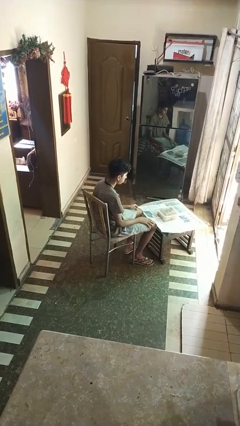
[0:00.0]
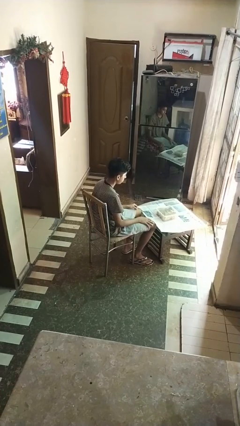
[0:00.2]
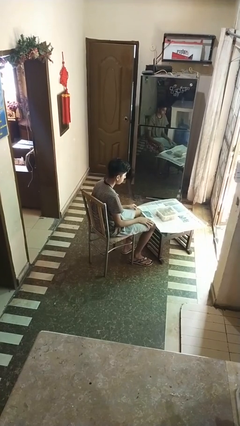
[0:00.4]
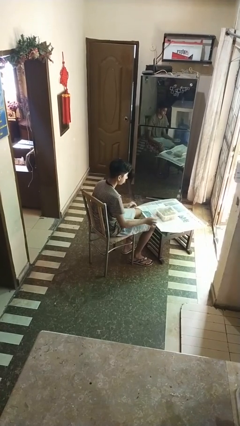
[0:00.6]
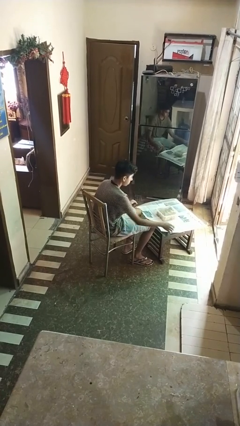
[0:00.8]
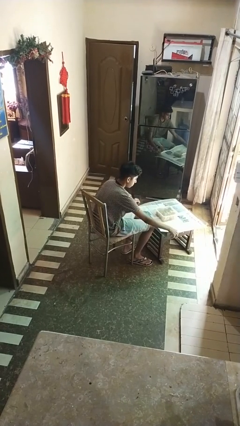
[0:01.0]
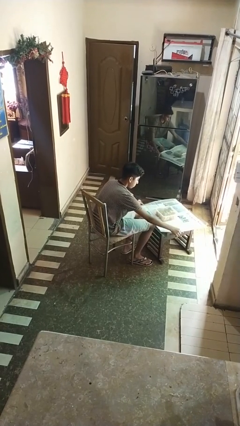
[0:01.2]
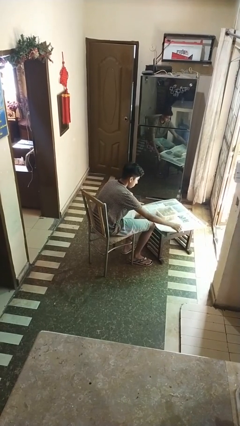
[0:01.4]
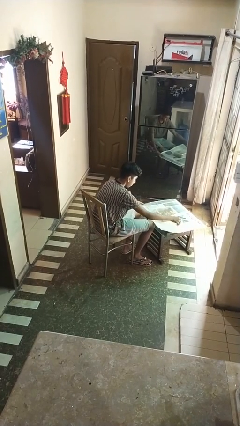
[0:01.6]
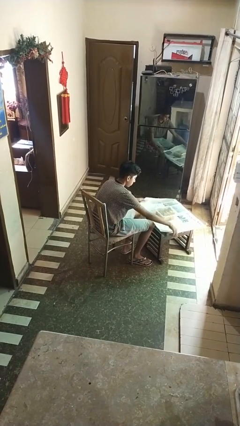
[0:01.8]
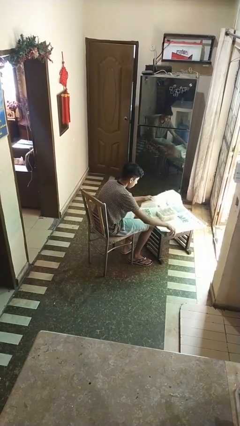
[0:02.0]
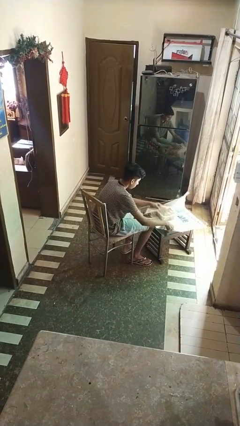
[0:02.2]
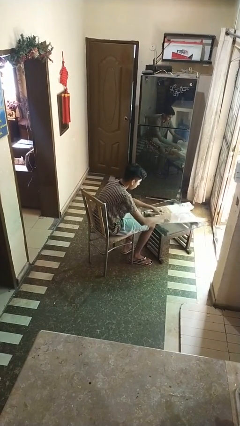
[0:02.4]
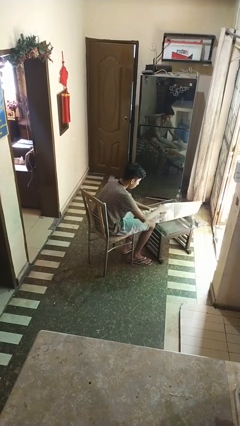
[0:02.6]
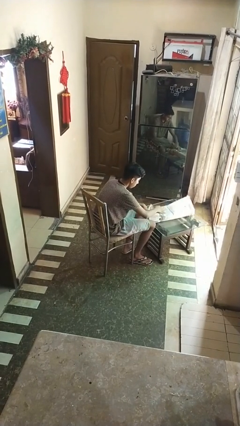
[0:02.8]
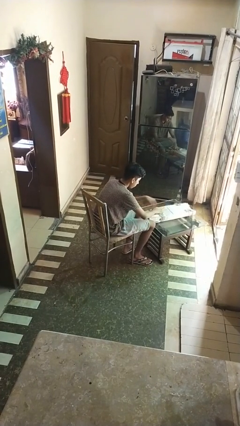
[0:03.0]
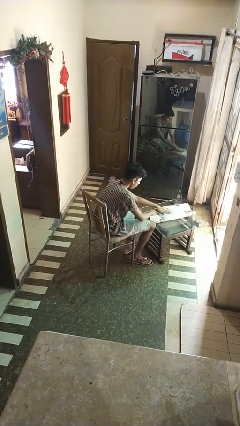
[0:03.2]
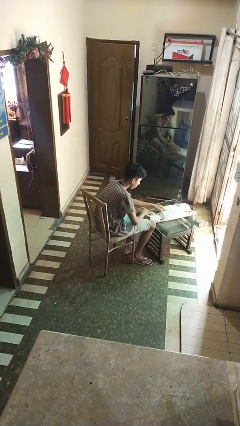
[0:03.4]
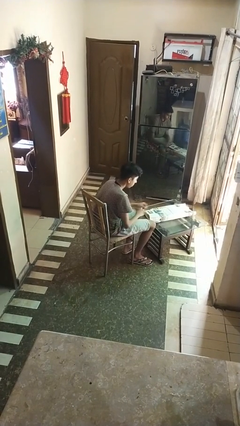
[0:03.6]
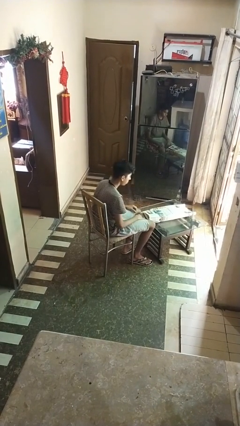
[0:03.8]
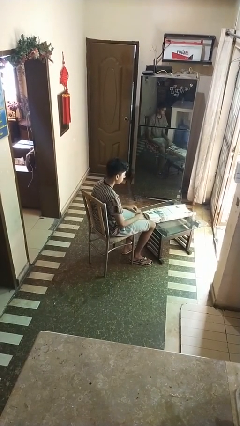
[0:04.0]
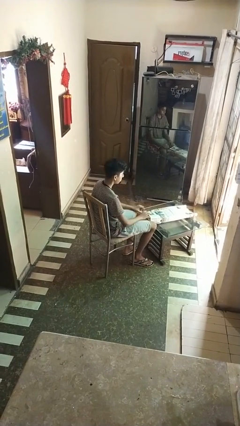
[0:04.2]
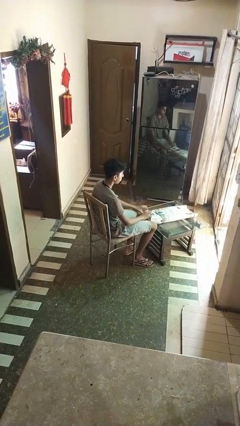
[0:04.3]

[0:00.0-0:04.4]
person wraps box

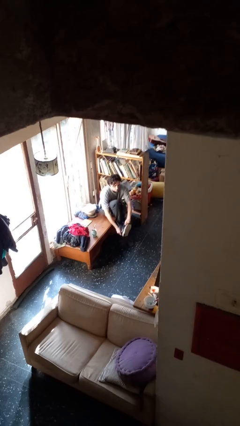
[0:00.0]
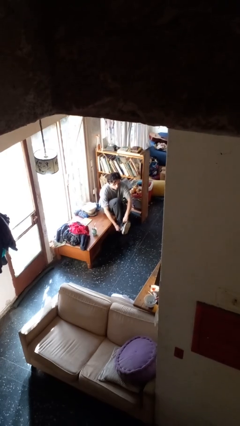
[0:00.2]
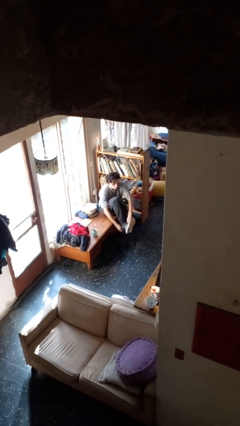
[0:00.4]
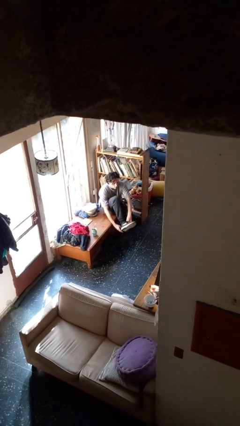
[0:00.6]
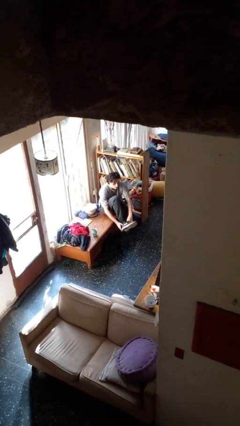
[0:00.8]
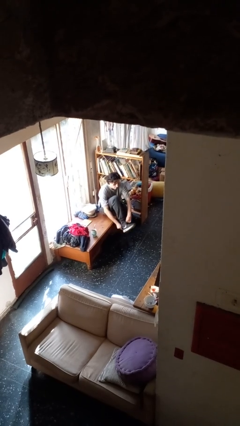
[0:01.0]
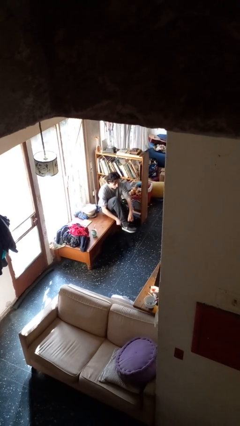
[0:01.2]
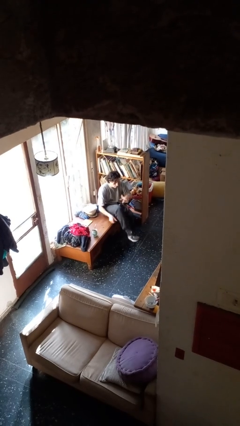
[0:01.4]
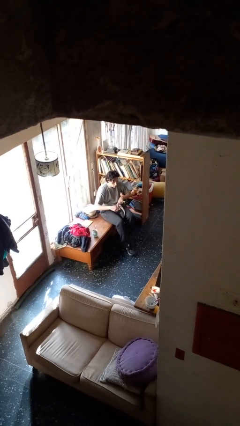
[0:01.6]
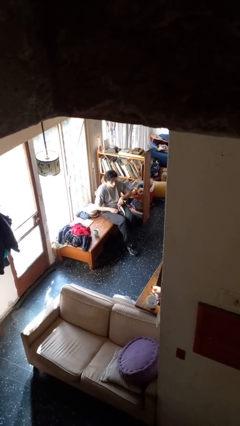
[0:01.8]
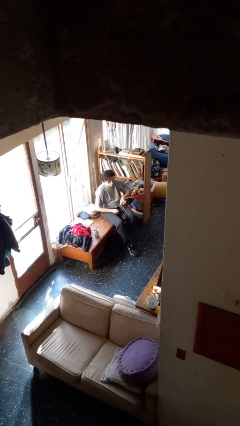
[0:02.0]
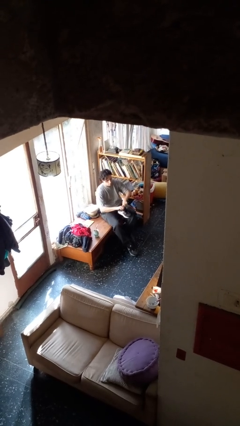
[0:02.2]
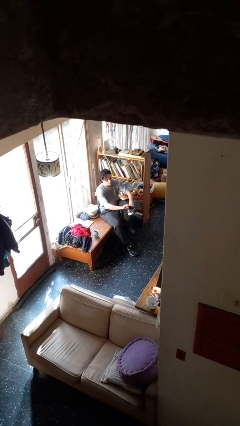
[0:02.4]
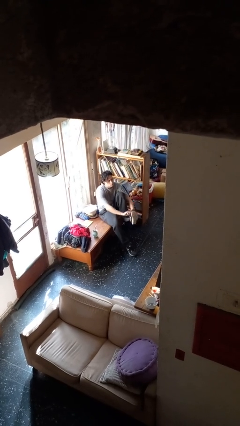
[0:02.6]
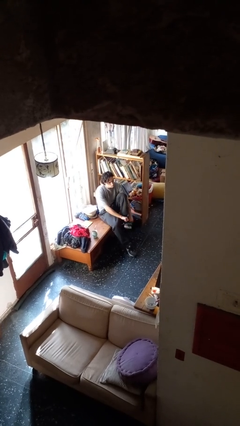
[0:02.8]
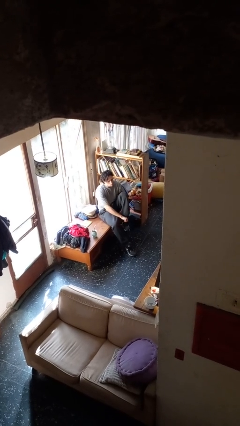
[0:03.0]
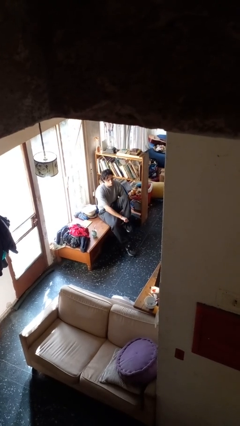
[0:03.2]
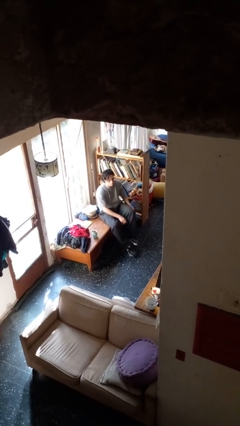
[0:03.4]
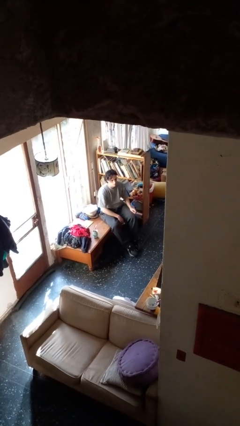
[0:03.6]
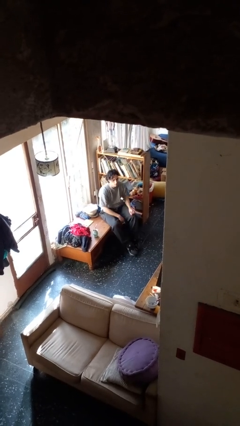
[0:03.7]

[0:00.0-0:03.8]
person puts on shoes

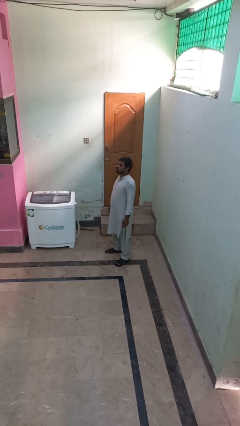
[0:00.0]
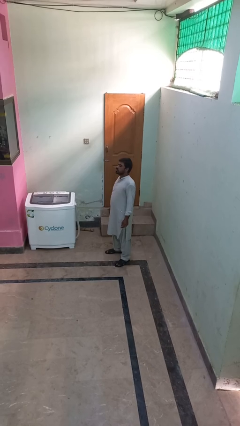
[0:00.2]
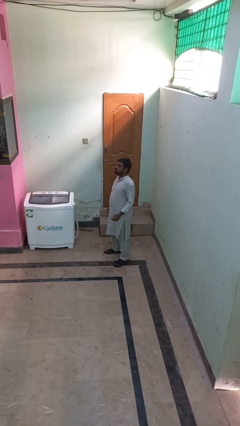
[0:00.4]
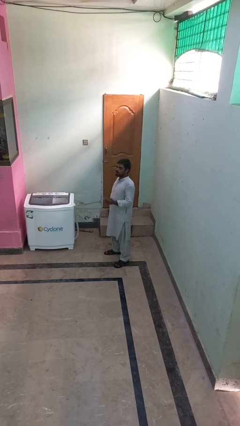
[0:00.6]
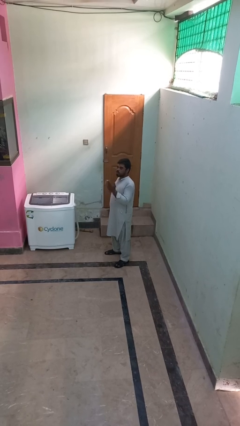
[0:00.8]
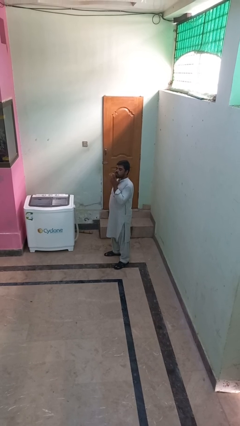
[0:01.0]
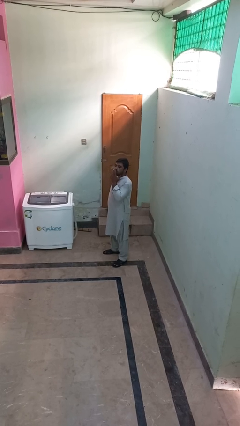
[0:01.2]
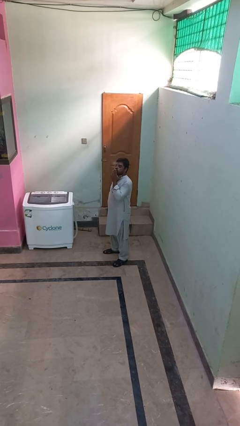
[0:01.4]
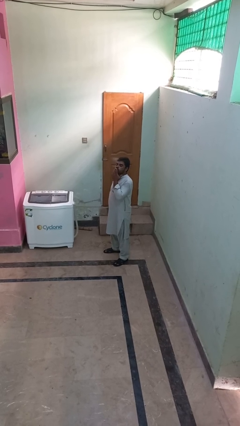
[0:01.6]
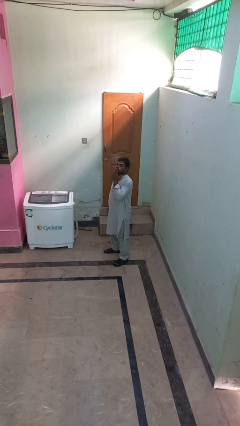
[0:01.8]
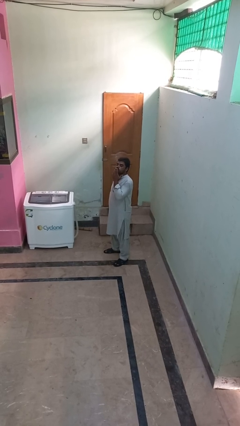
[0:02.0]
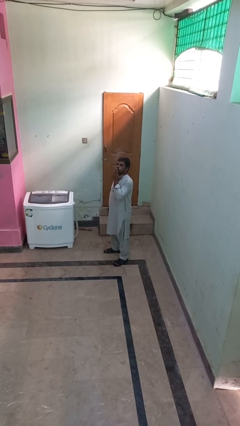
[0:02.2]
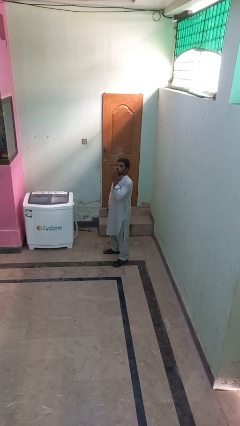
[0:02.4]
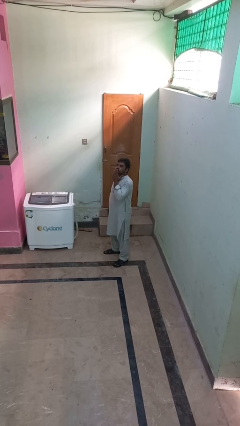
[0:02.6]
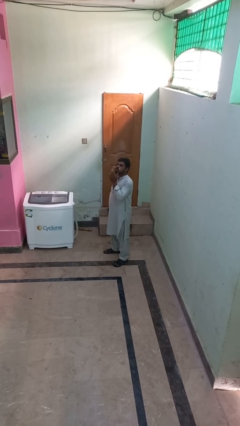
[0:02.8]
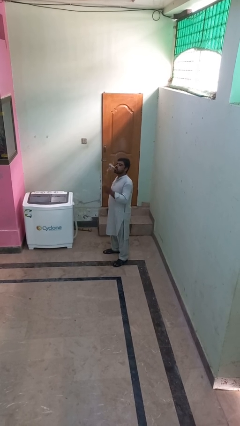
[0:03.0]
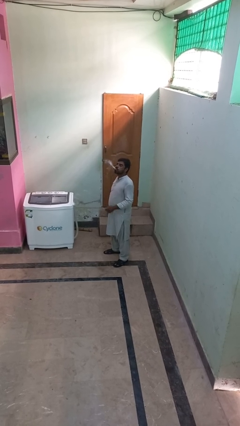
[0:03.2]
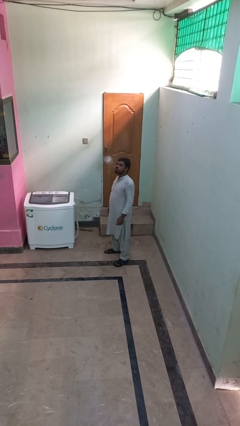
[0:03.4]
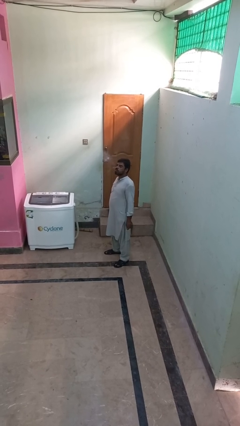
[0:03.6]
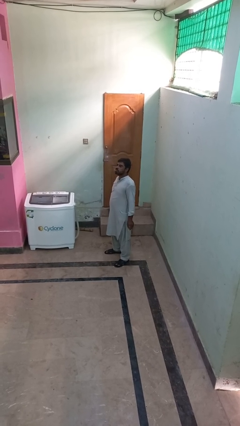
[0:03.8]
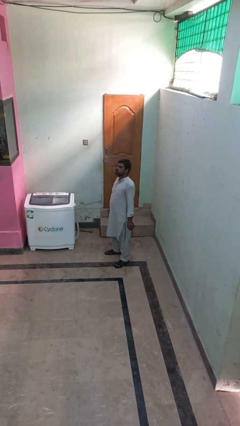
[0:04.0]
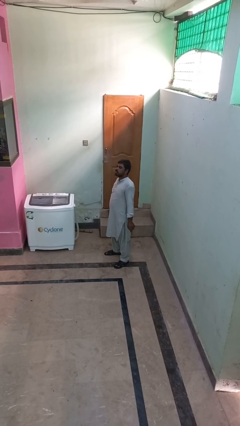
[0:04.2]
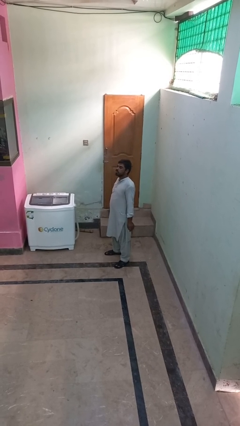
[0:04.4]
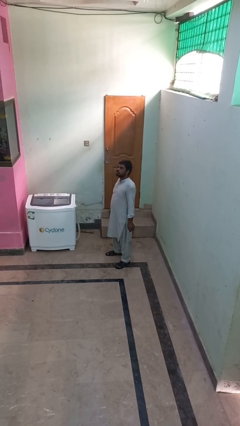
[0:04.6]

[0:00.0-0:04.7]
person vapes

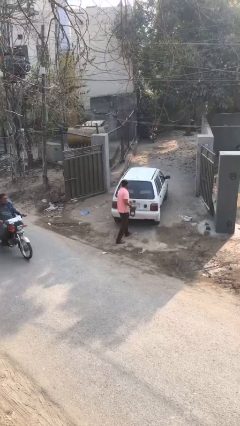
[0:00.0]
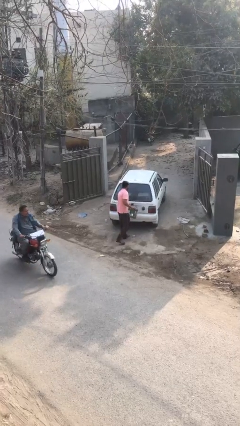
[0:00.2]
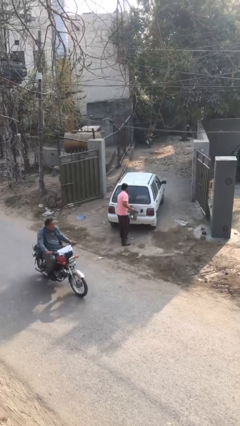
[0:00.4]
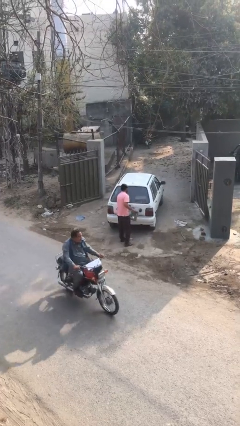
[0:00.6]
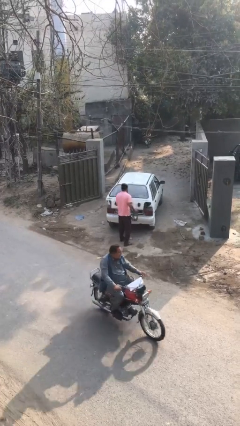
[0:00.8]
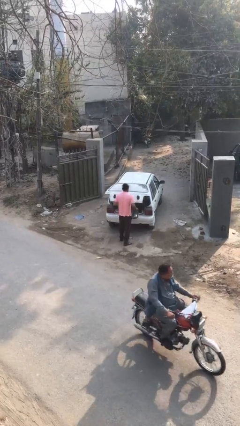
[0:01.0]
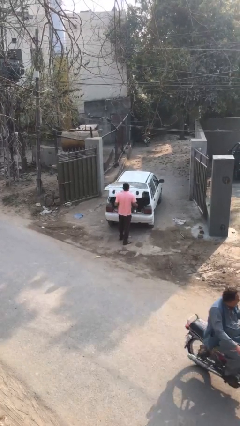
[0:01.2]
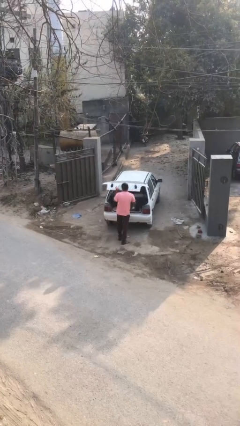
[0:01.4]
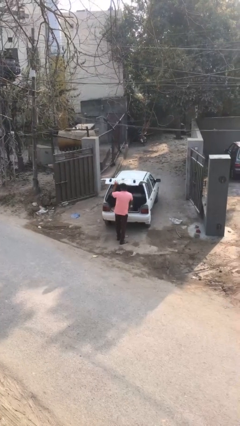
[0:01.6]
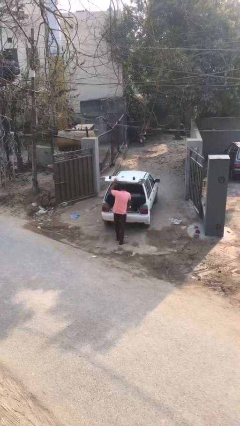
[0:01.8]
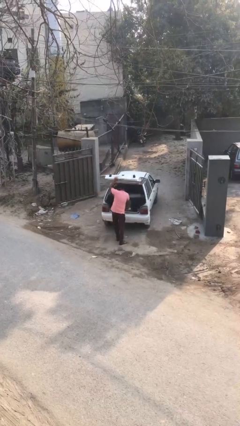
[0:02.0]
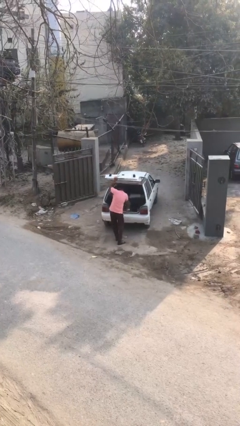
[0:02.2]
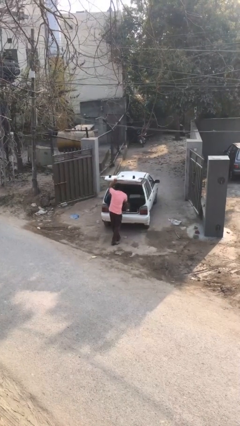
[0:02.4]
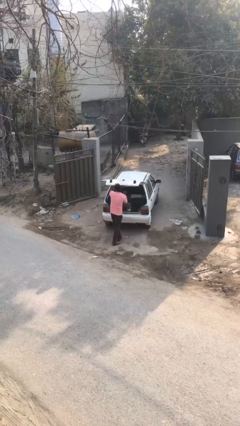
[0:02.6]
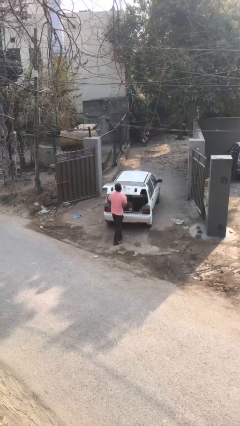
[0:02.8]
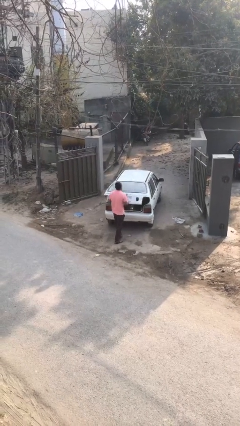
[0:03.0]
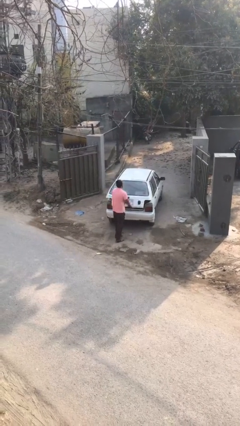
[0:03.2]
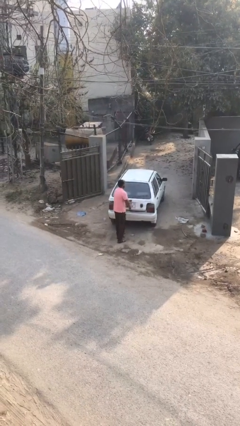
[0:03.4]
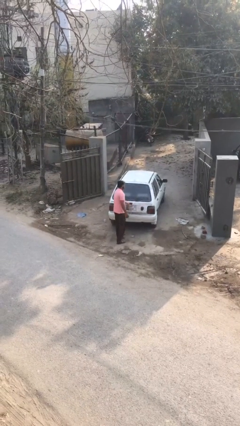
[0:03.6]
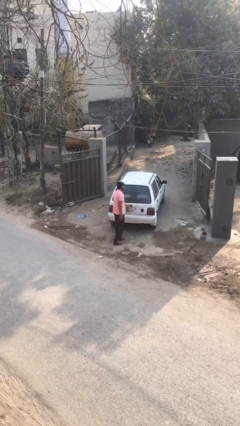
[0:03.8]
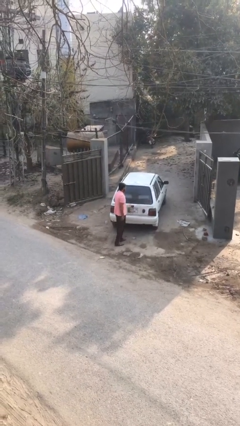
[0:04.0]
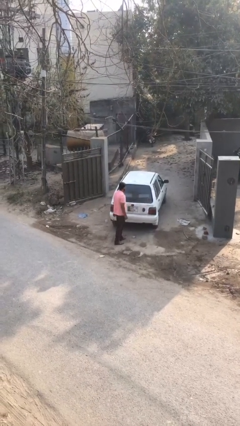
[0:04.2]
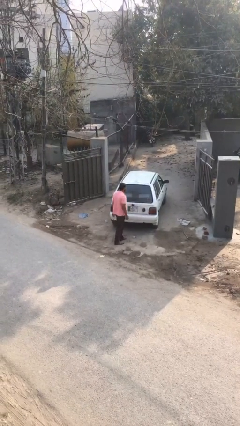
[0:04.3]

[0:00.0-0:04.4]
person loads car

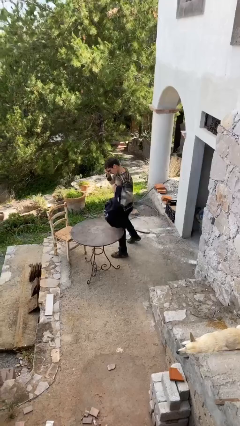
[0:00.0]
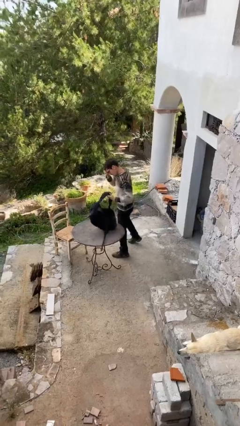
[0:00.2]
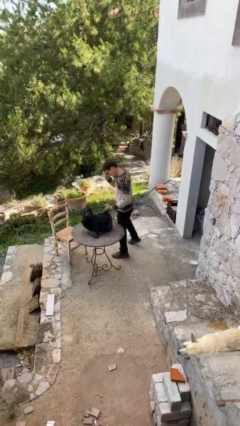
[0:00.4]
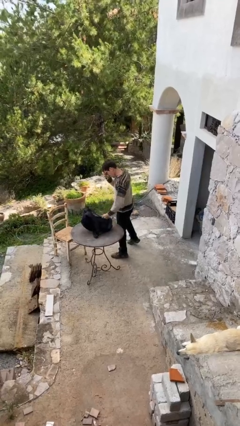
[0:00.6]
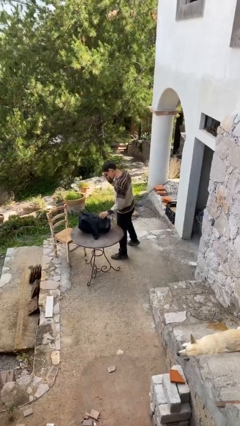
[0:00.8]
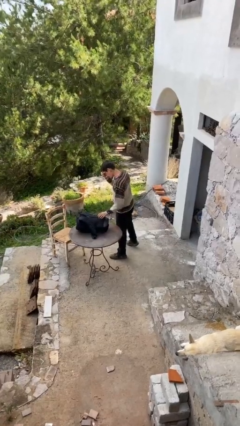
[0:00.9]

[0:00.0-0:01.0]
person puts down object on table
